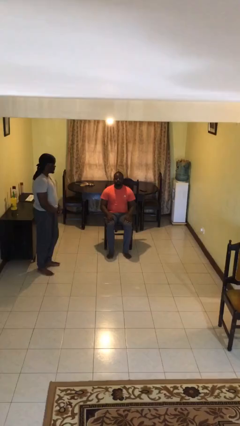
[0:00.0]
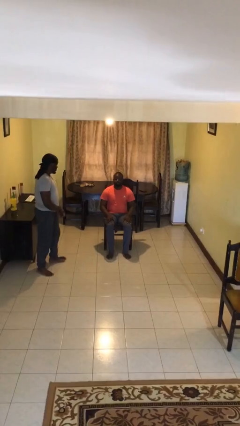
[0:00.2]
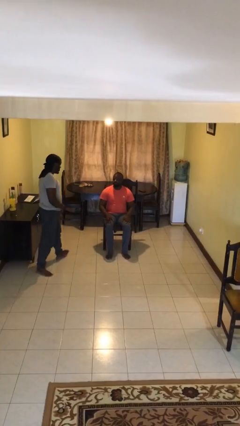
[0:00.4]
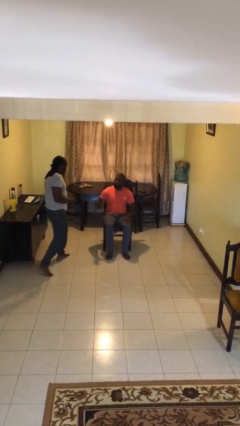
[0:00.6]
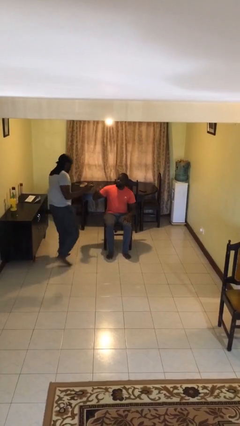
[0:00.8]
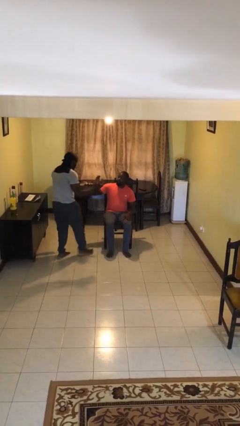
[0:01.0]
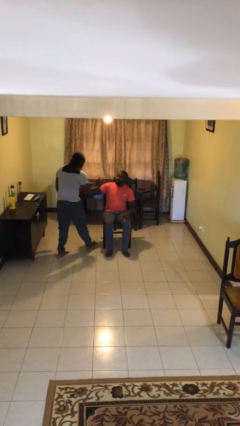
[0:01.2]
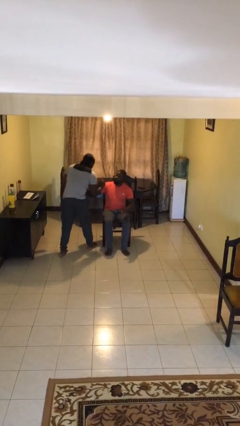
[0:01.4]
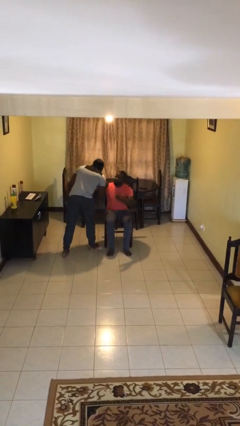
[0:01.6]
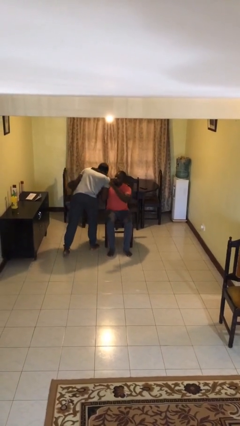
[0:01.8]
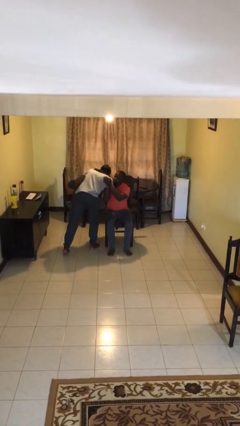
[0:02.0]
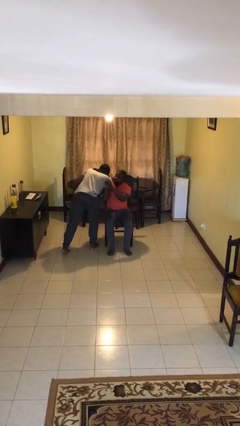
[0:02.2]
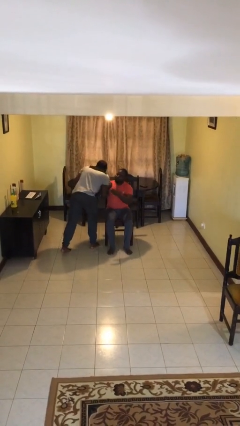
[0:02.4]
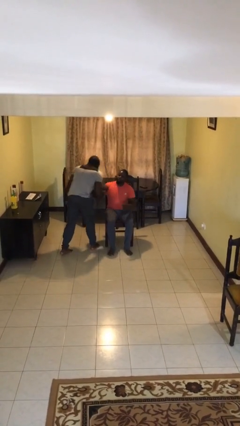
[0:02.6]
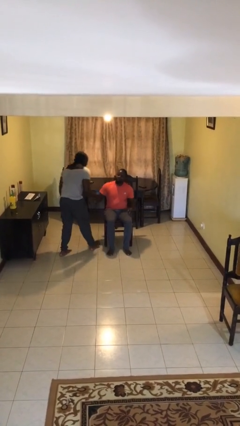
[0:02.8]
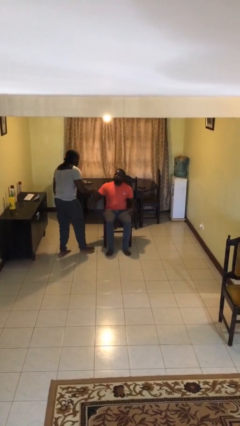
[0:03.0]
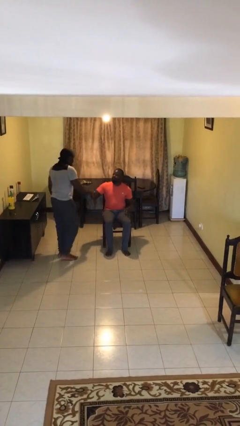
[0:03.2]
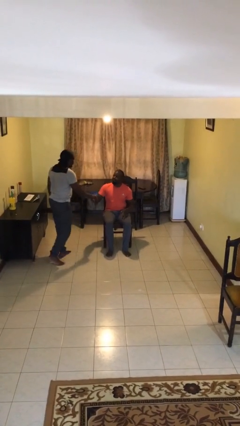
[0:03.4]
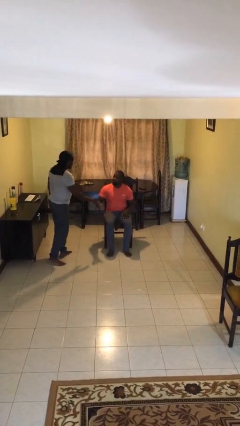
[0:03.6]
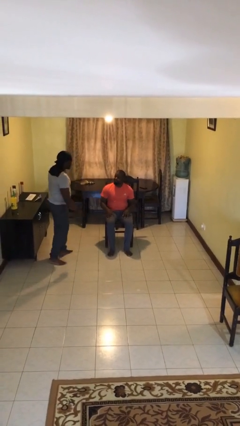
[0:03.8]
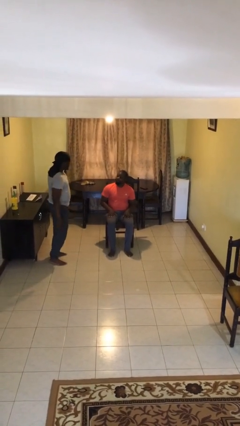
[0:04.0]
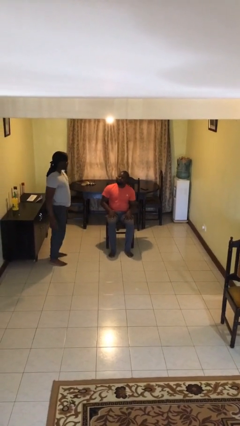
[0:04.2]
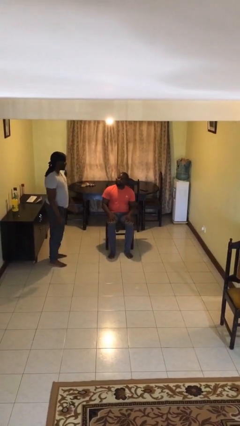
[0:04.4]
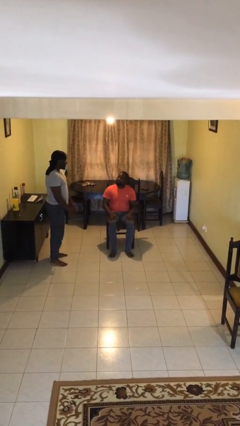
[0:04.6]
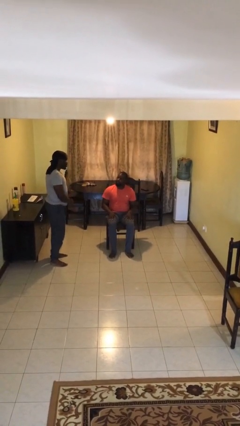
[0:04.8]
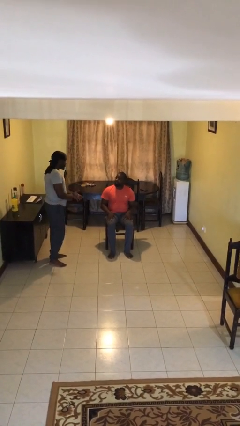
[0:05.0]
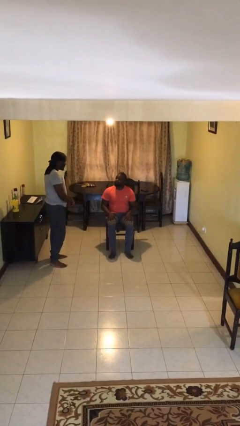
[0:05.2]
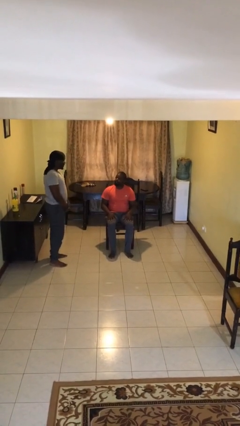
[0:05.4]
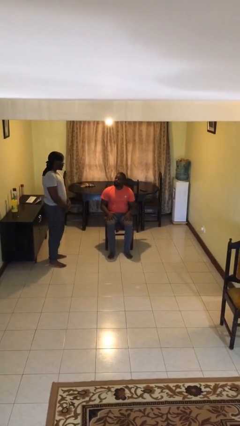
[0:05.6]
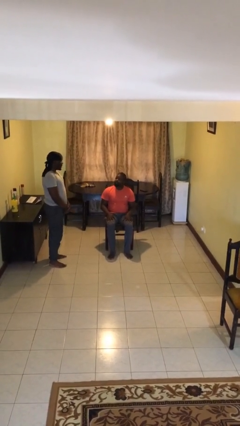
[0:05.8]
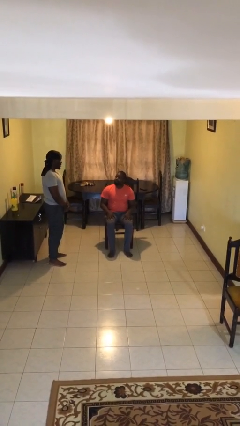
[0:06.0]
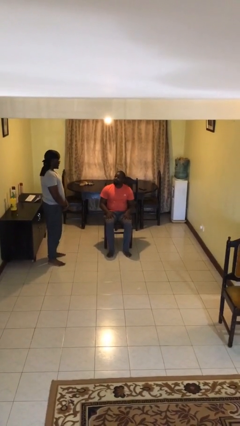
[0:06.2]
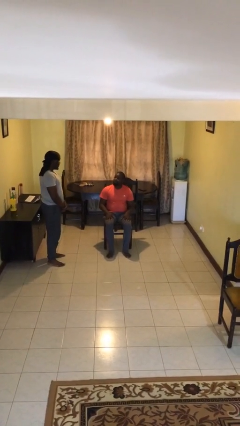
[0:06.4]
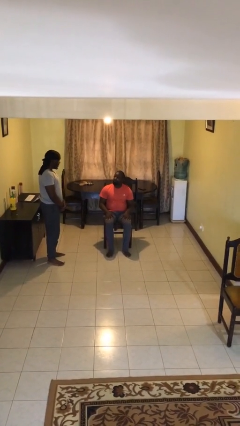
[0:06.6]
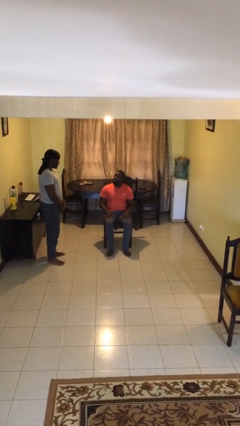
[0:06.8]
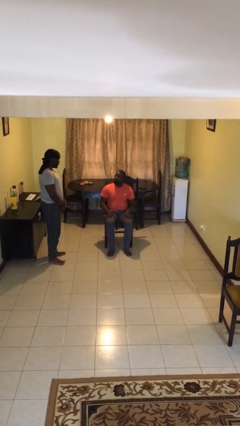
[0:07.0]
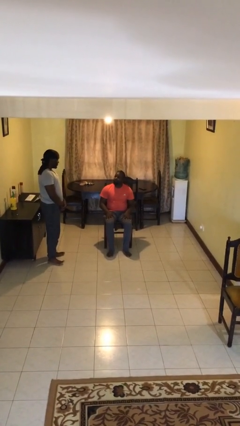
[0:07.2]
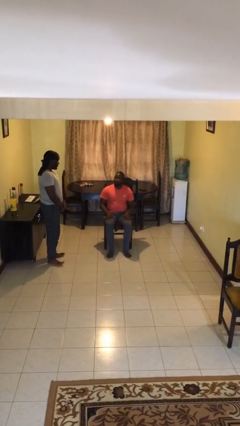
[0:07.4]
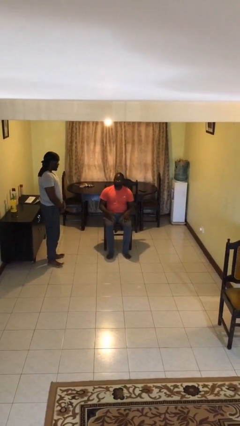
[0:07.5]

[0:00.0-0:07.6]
person embraces person

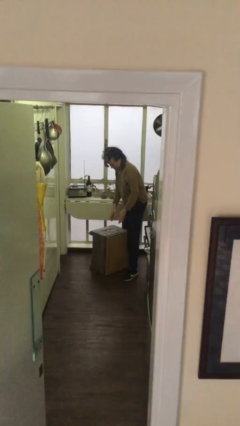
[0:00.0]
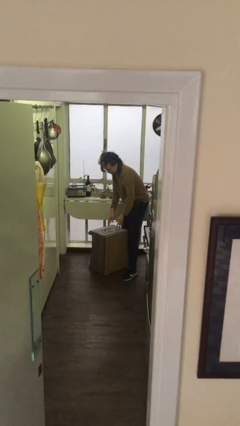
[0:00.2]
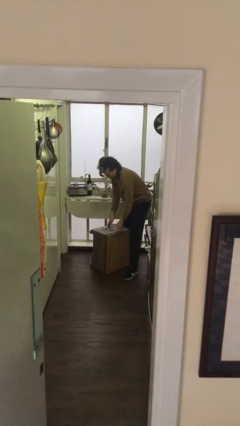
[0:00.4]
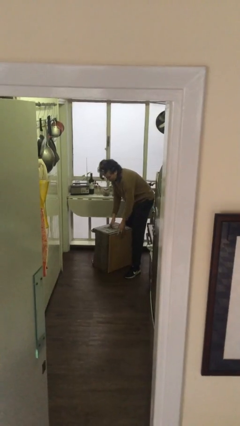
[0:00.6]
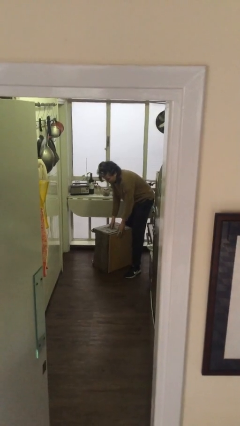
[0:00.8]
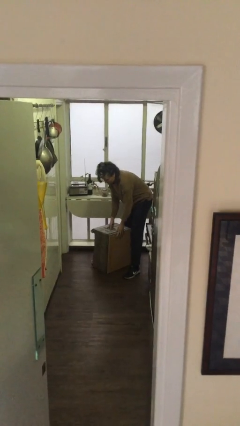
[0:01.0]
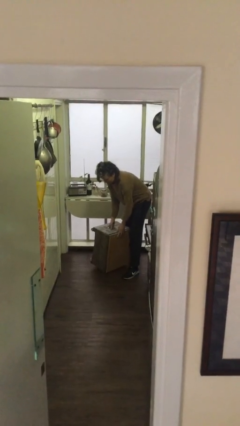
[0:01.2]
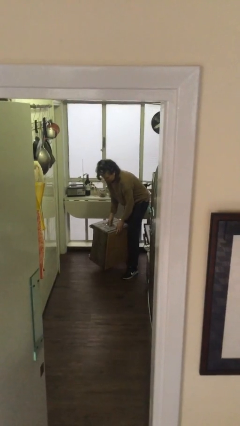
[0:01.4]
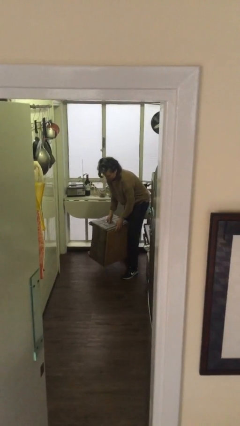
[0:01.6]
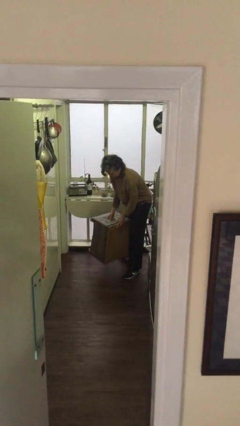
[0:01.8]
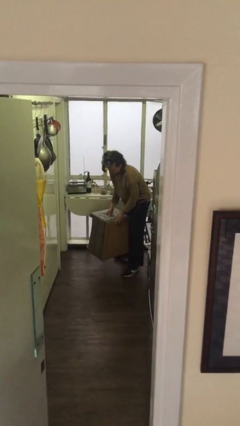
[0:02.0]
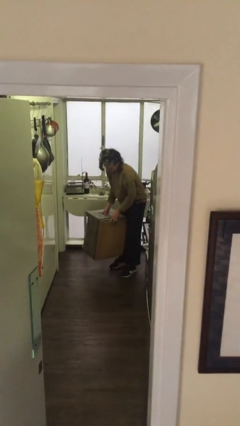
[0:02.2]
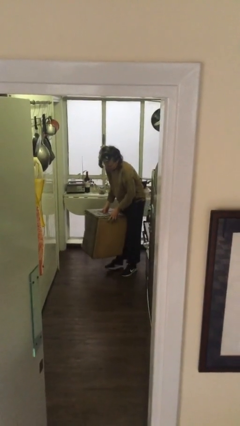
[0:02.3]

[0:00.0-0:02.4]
person picks up object from floor

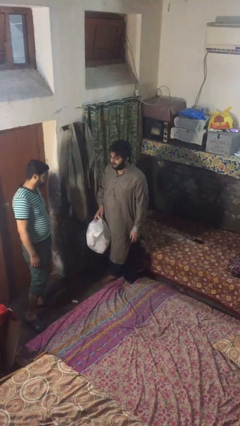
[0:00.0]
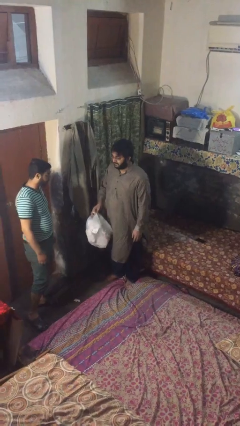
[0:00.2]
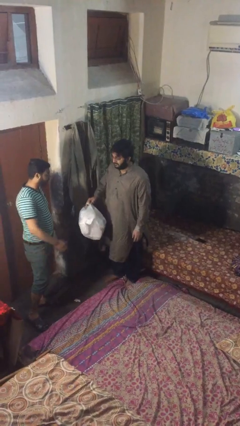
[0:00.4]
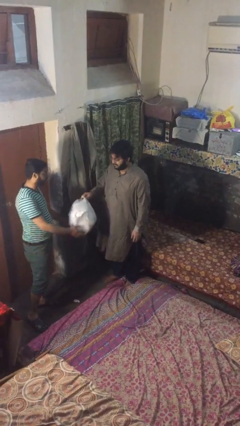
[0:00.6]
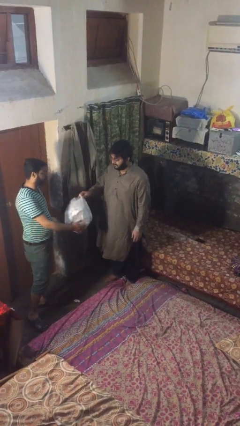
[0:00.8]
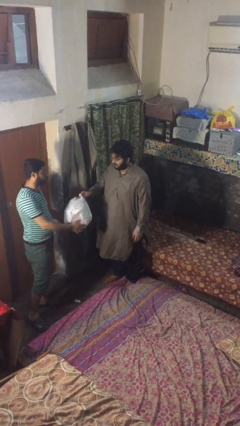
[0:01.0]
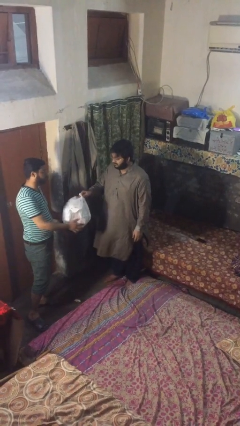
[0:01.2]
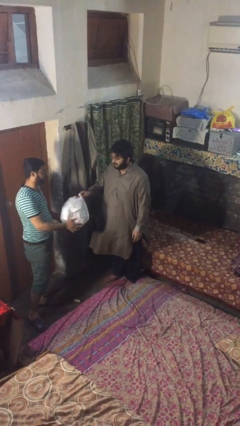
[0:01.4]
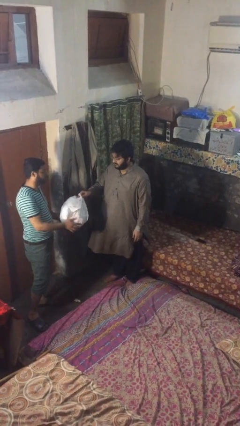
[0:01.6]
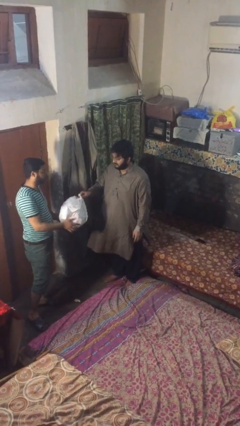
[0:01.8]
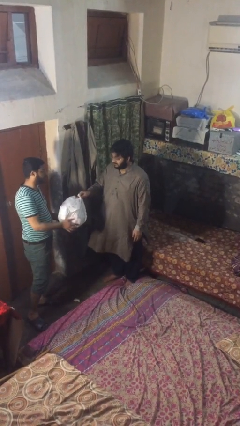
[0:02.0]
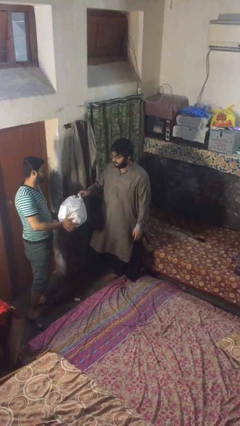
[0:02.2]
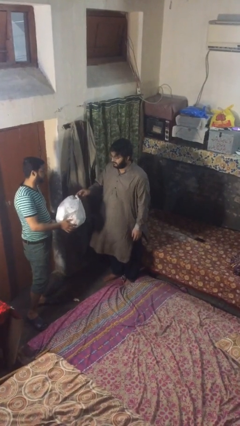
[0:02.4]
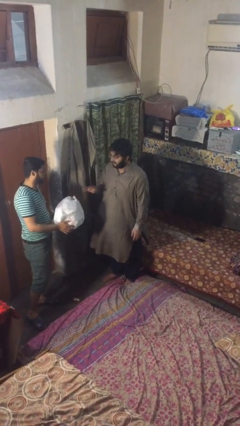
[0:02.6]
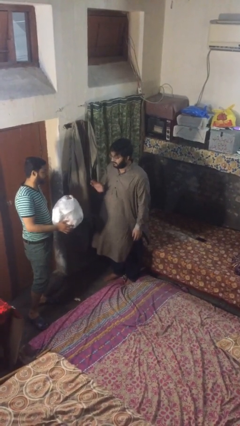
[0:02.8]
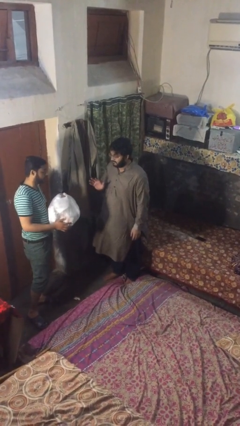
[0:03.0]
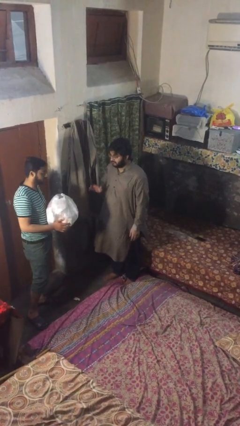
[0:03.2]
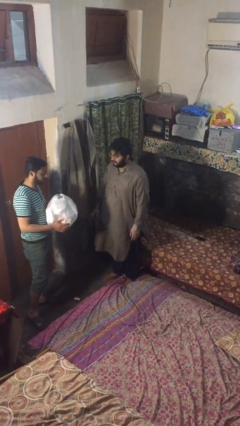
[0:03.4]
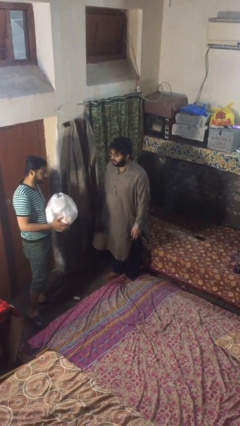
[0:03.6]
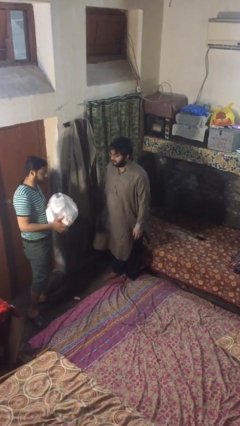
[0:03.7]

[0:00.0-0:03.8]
person transfers object to person

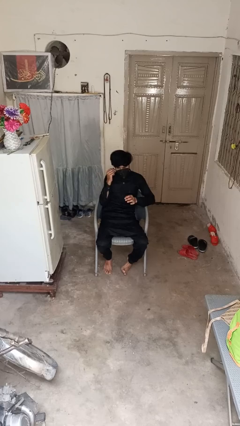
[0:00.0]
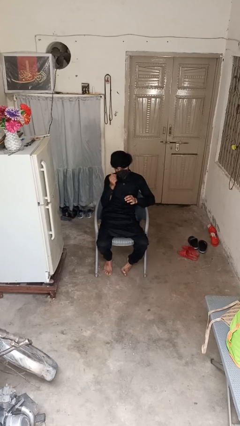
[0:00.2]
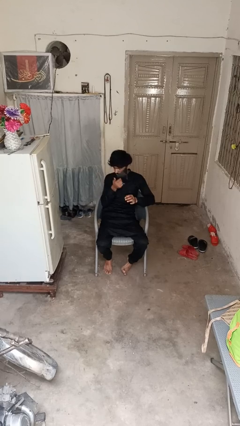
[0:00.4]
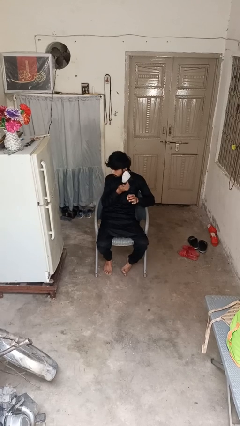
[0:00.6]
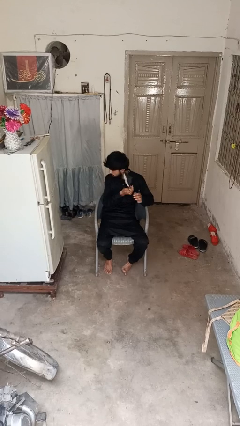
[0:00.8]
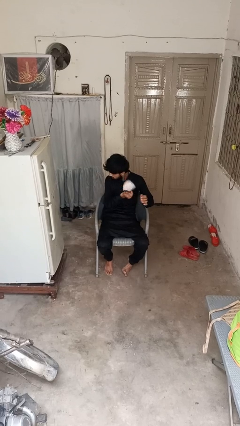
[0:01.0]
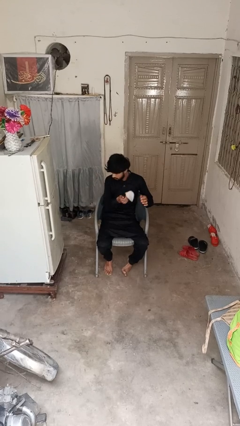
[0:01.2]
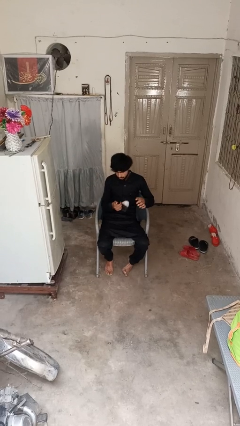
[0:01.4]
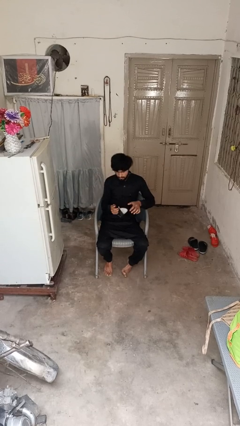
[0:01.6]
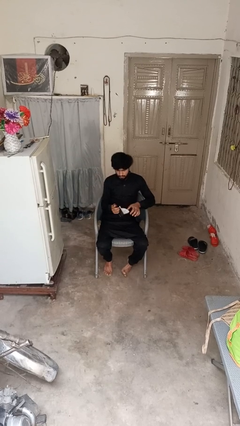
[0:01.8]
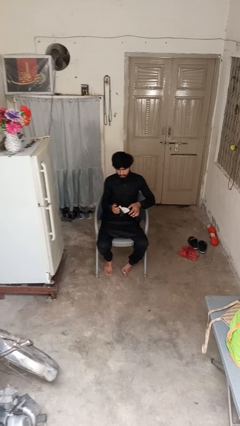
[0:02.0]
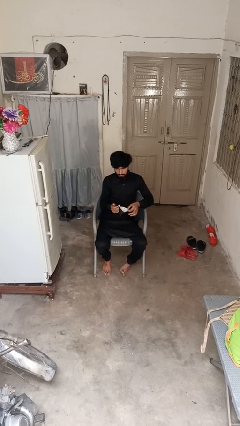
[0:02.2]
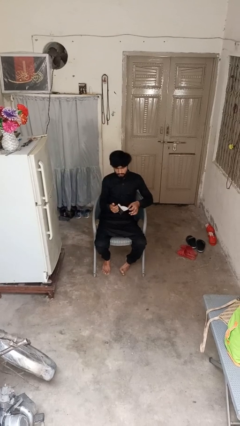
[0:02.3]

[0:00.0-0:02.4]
person takes off facemask

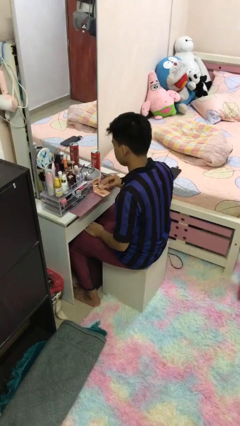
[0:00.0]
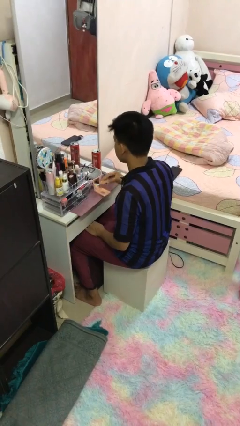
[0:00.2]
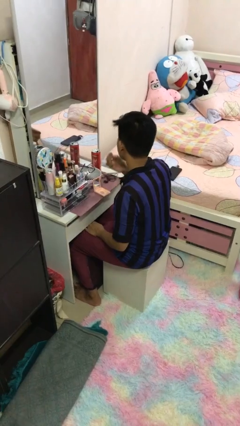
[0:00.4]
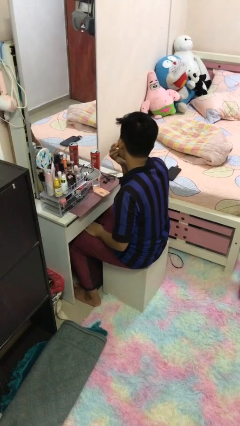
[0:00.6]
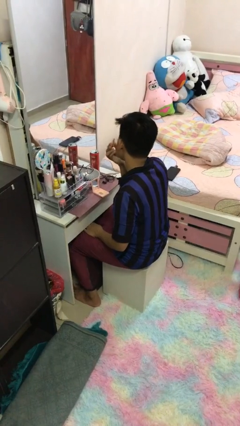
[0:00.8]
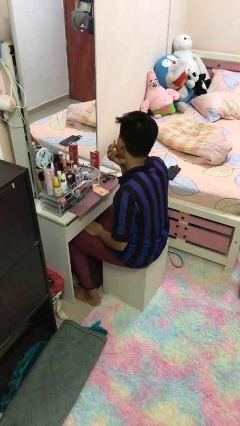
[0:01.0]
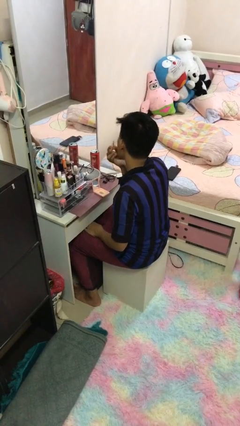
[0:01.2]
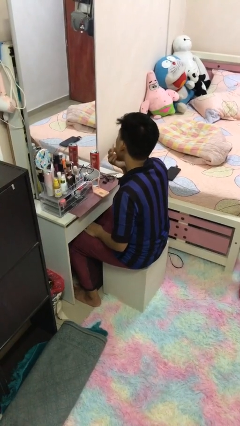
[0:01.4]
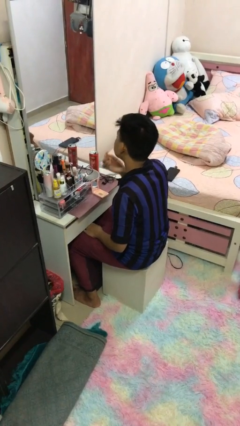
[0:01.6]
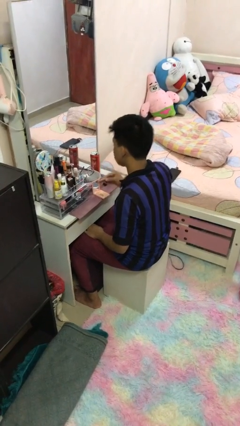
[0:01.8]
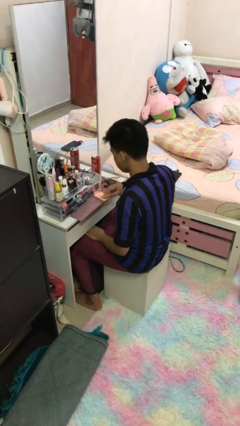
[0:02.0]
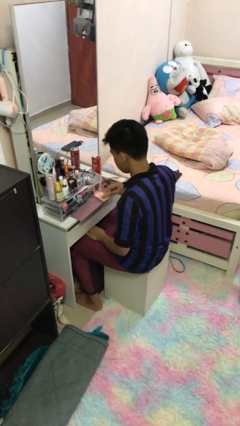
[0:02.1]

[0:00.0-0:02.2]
person applies foundation makeup
